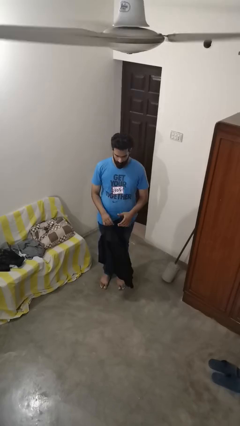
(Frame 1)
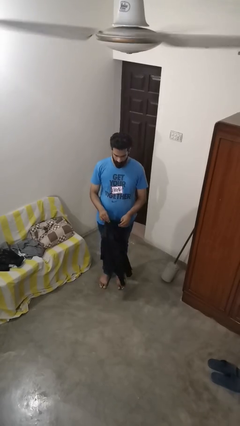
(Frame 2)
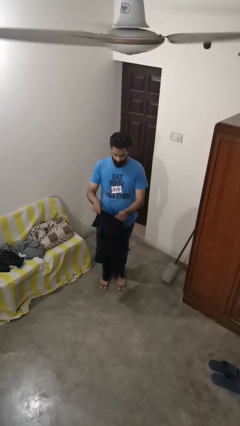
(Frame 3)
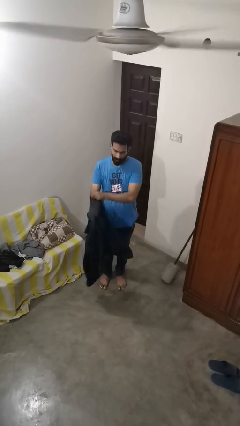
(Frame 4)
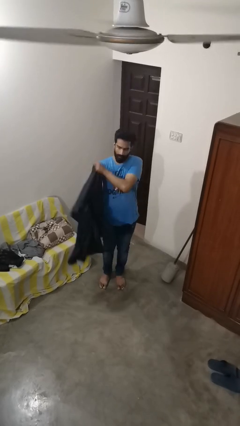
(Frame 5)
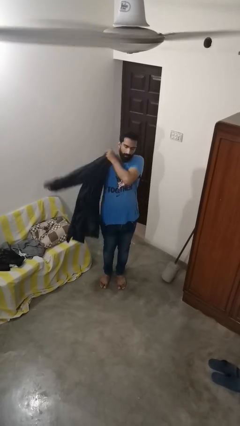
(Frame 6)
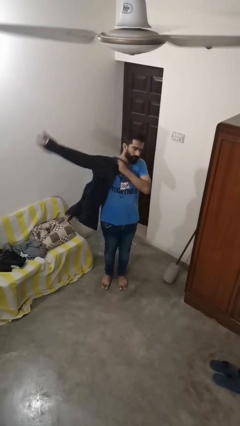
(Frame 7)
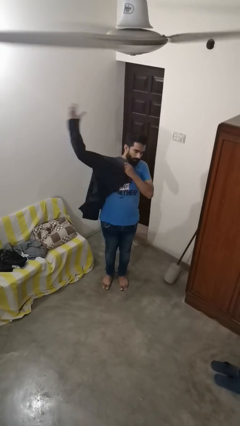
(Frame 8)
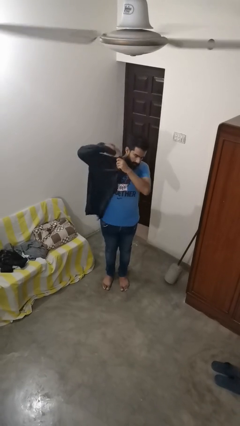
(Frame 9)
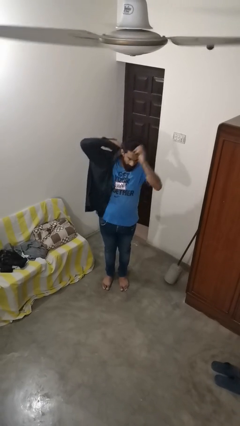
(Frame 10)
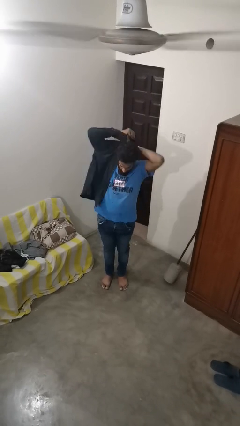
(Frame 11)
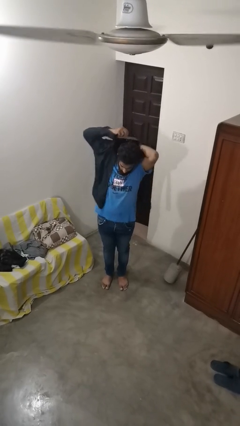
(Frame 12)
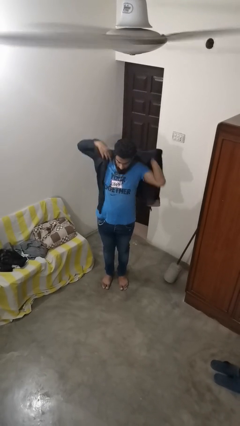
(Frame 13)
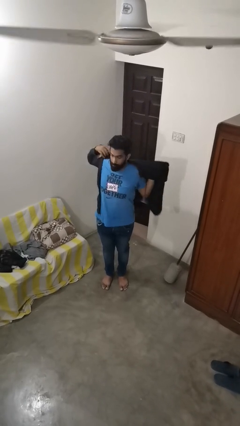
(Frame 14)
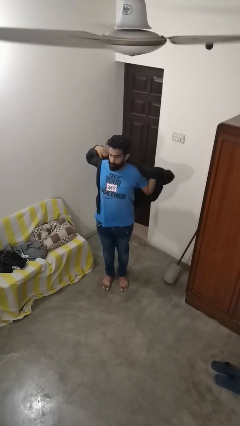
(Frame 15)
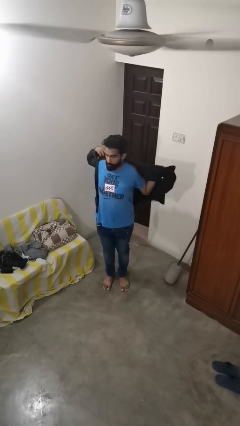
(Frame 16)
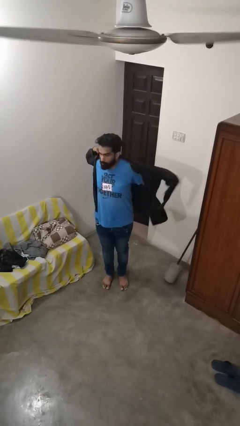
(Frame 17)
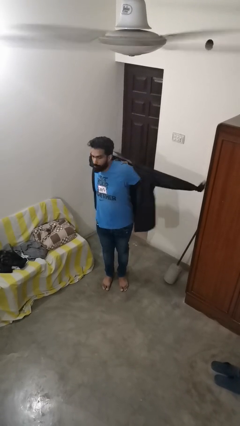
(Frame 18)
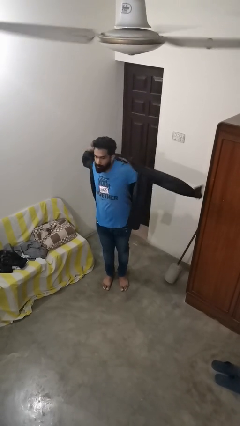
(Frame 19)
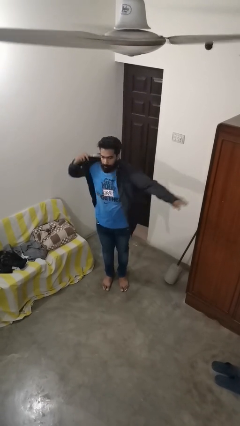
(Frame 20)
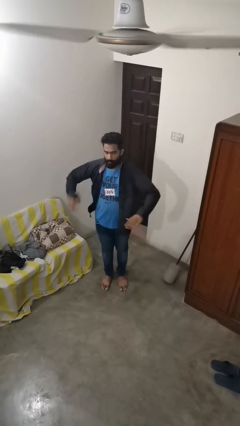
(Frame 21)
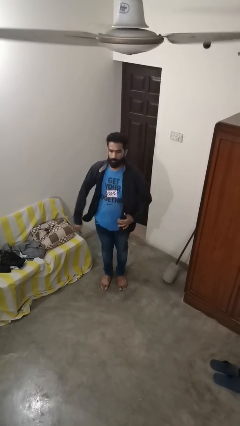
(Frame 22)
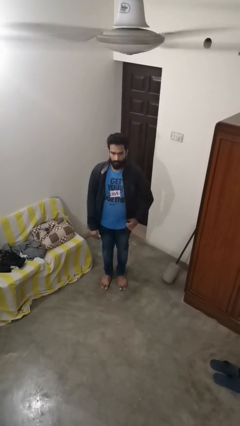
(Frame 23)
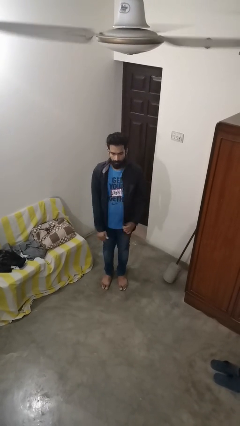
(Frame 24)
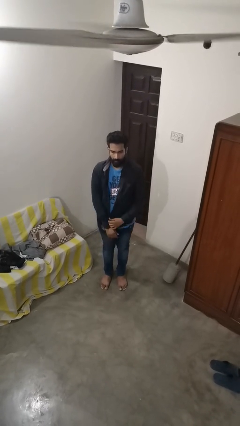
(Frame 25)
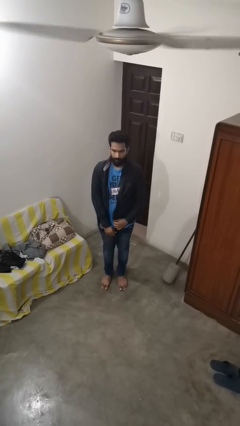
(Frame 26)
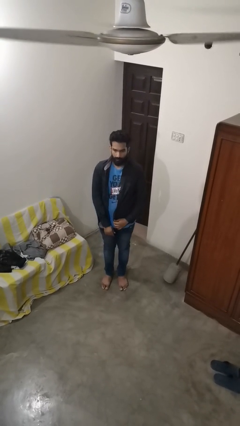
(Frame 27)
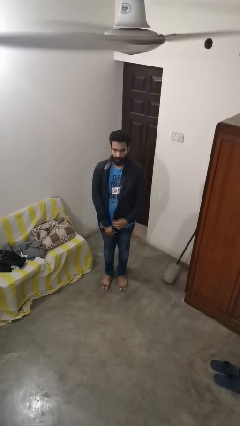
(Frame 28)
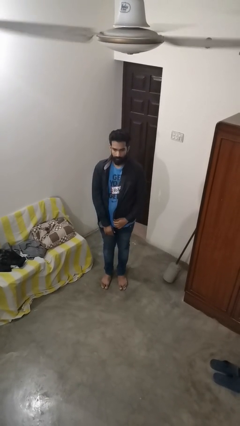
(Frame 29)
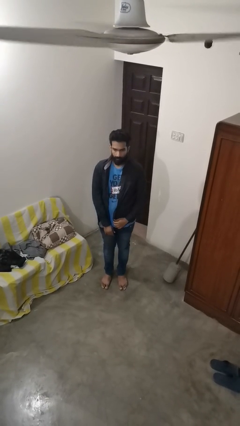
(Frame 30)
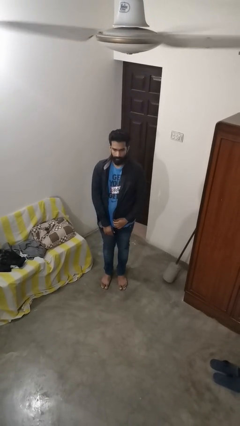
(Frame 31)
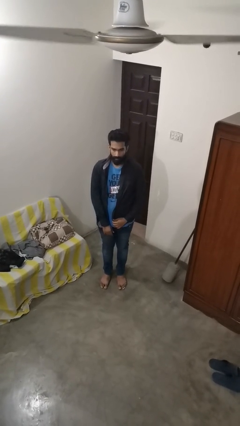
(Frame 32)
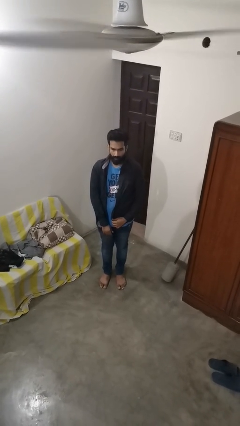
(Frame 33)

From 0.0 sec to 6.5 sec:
person puts on shirt

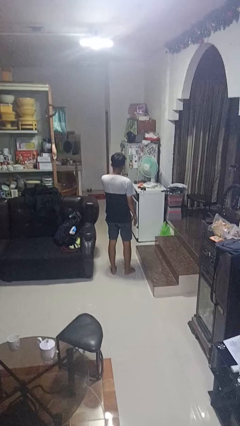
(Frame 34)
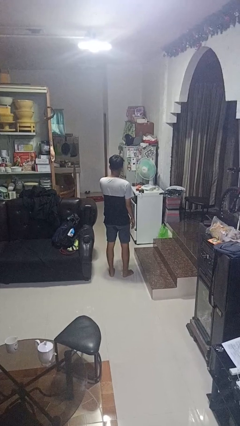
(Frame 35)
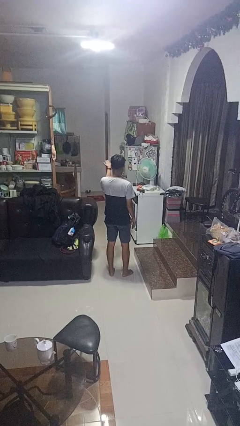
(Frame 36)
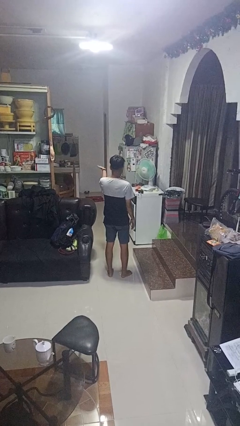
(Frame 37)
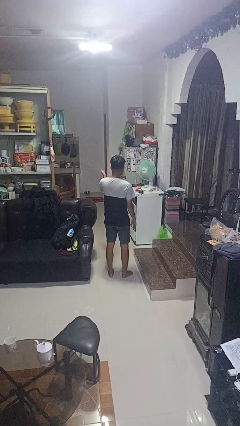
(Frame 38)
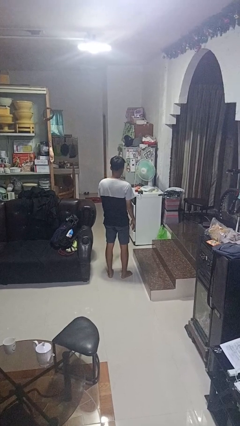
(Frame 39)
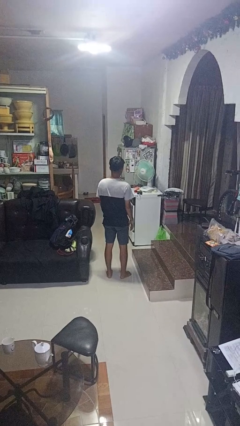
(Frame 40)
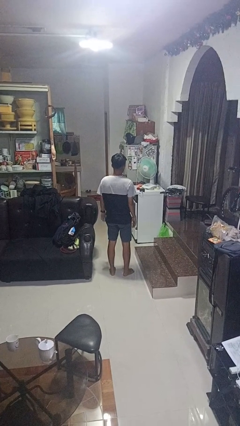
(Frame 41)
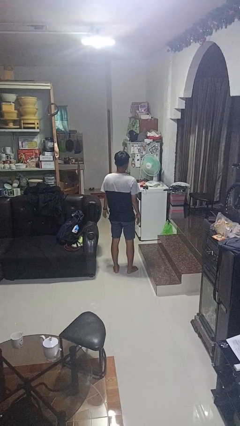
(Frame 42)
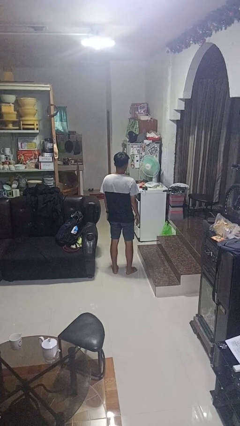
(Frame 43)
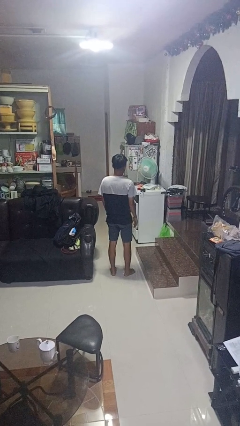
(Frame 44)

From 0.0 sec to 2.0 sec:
person gestures blow kiss

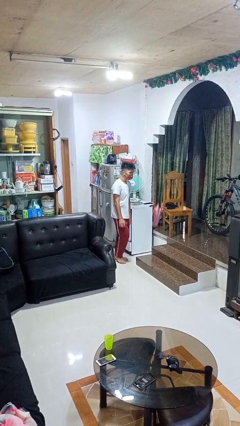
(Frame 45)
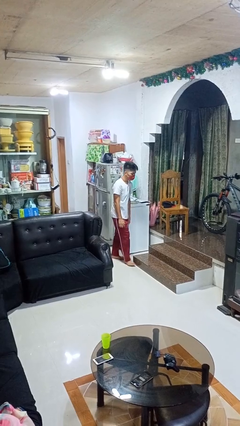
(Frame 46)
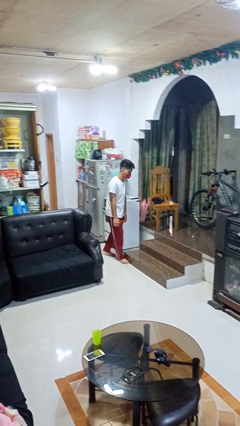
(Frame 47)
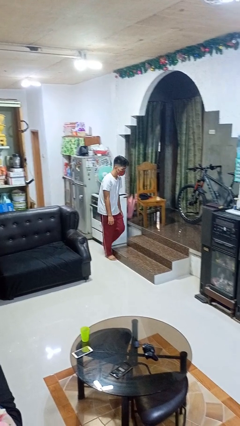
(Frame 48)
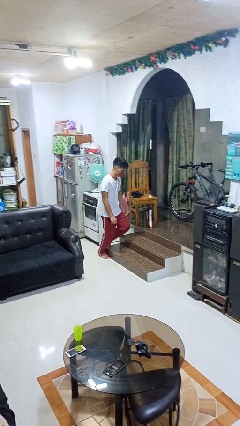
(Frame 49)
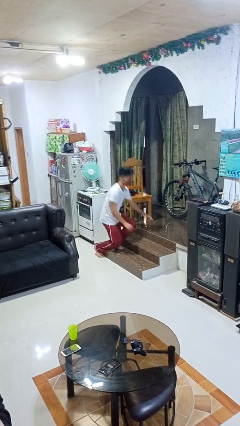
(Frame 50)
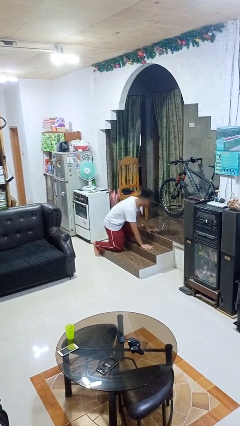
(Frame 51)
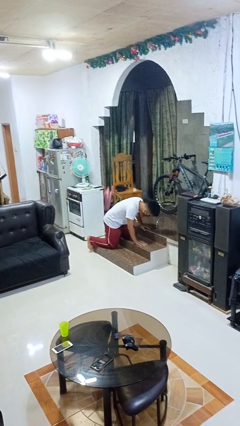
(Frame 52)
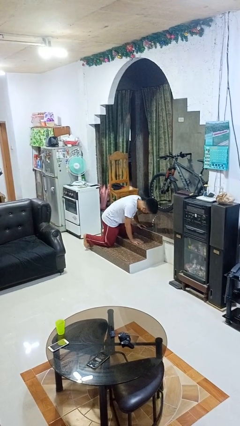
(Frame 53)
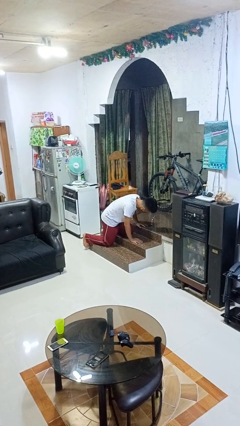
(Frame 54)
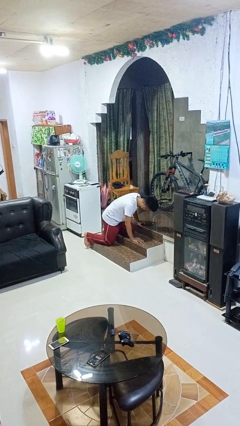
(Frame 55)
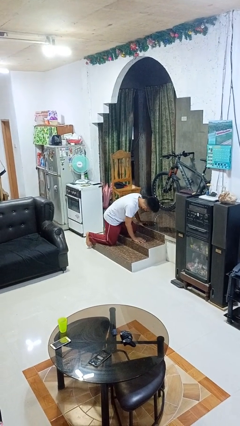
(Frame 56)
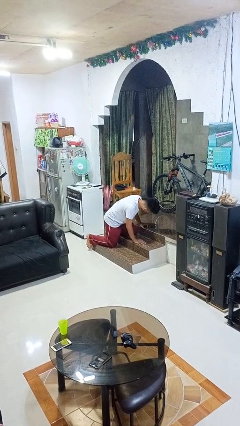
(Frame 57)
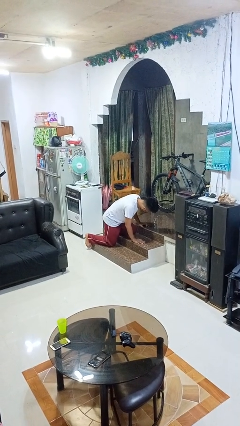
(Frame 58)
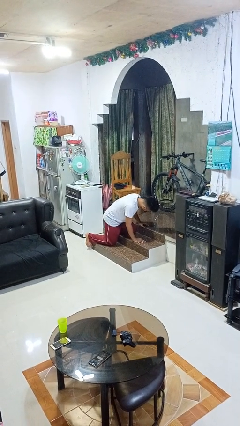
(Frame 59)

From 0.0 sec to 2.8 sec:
person trips on object on floor

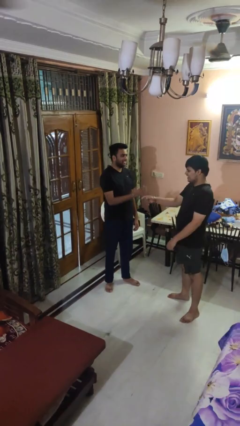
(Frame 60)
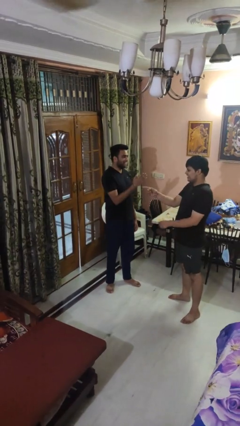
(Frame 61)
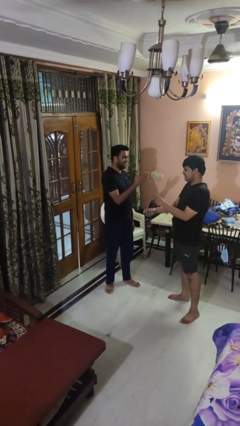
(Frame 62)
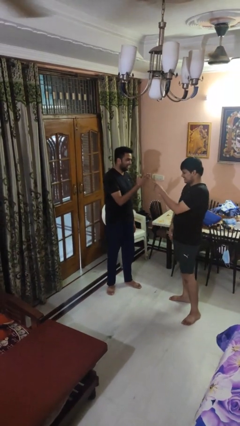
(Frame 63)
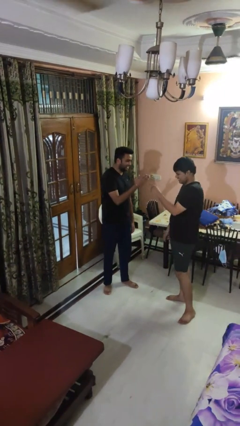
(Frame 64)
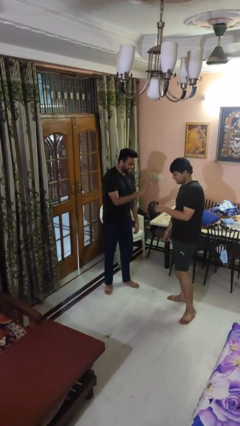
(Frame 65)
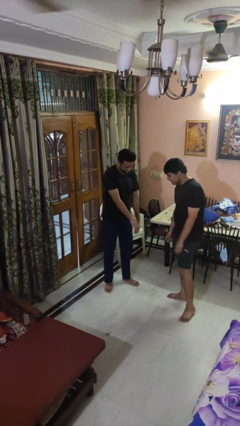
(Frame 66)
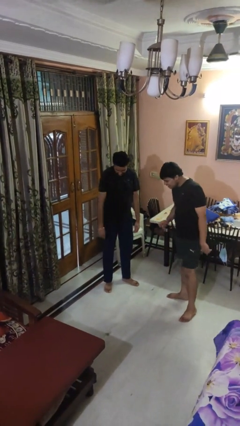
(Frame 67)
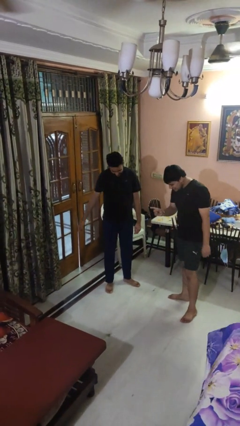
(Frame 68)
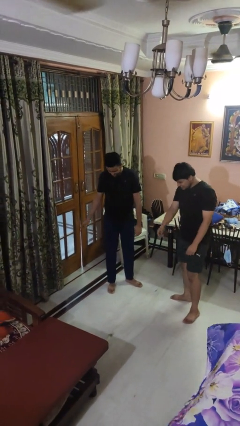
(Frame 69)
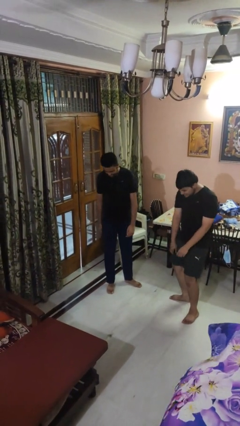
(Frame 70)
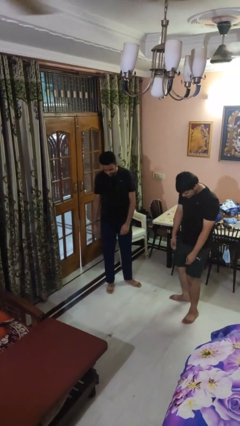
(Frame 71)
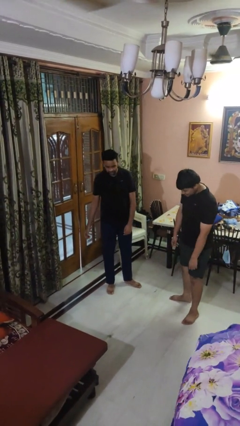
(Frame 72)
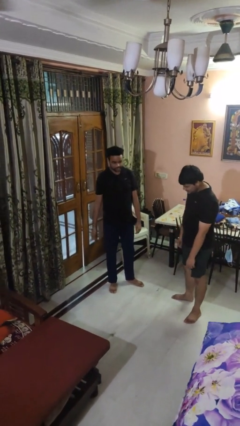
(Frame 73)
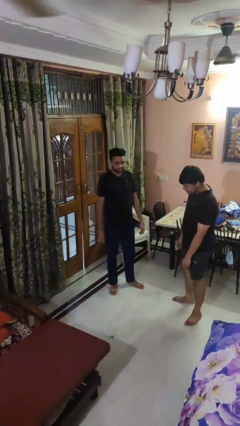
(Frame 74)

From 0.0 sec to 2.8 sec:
person laughs with person

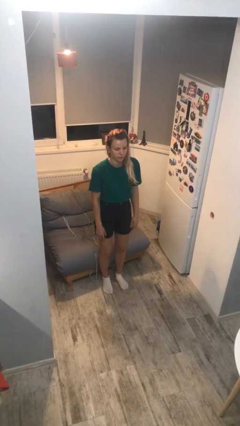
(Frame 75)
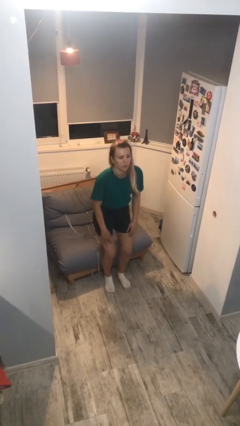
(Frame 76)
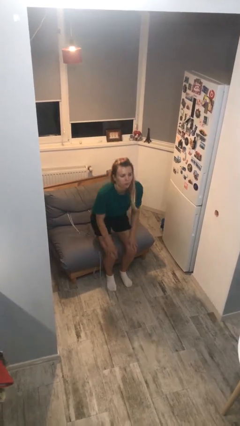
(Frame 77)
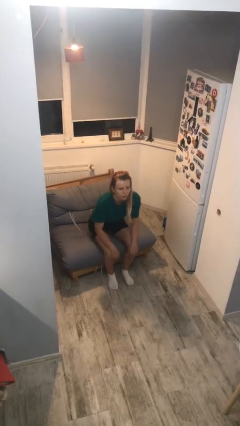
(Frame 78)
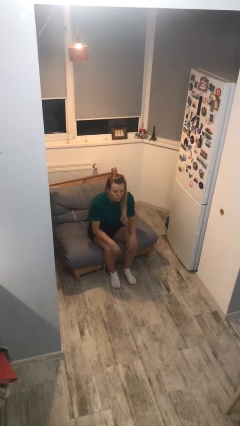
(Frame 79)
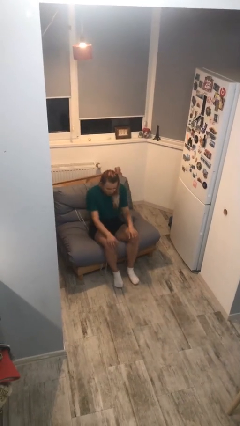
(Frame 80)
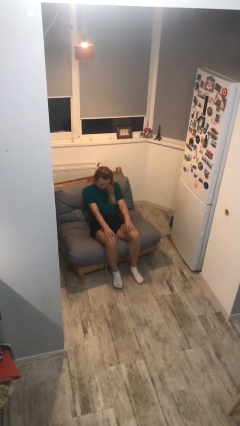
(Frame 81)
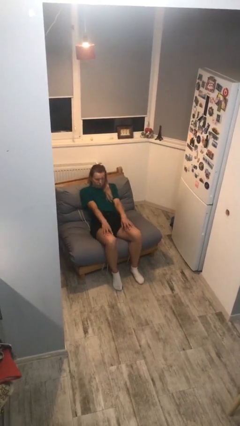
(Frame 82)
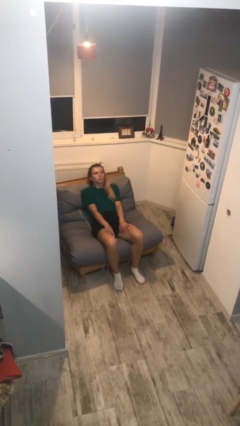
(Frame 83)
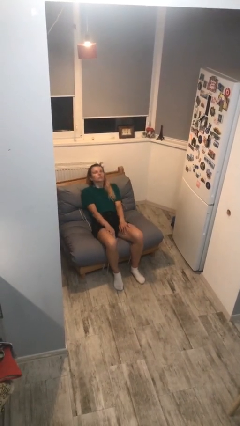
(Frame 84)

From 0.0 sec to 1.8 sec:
person lies down on couch

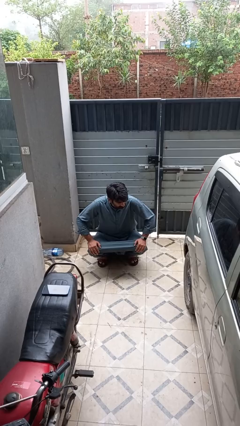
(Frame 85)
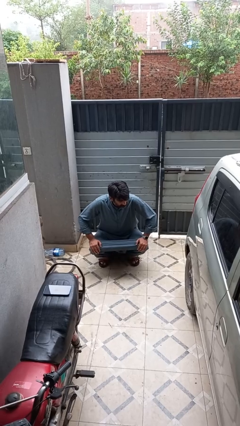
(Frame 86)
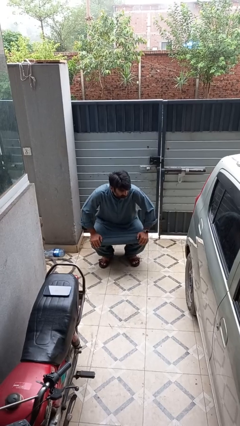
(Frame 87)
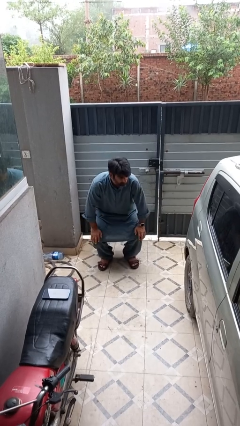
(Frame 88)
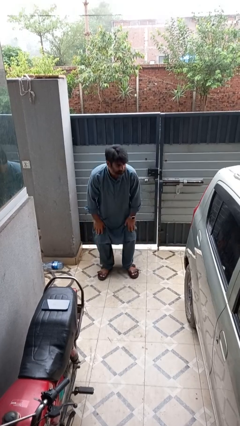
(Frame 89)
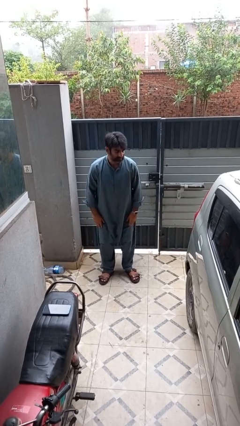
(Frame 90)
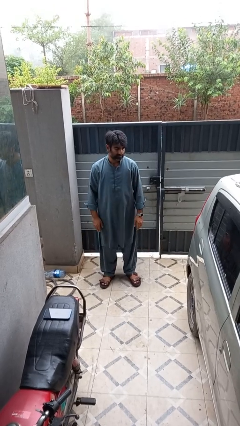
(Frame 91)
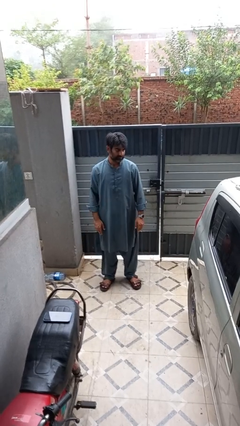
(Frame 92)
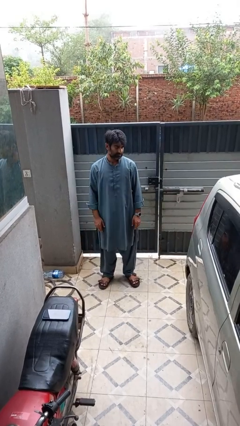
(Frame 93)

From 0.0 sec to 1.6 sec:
person stands up
